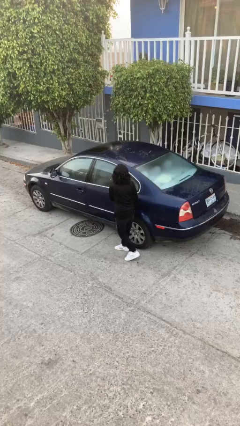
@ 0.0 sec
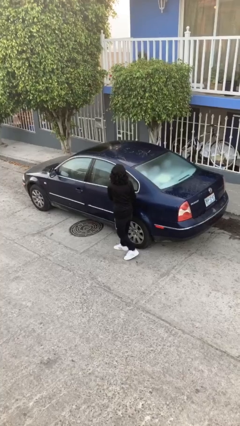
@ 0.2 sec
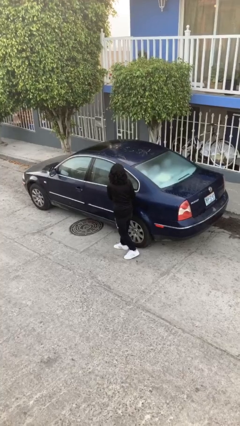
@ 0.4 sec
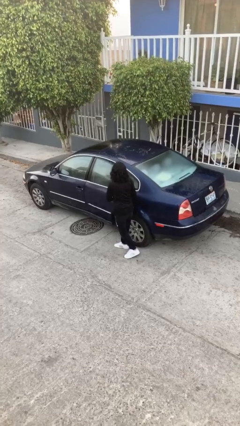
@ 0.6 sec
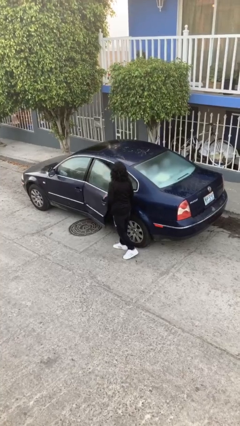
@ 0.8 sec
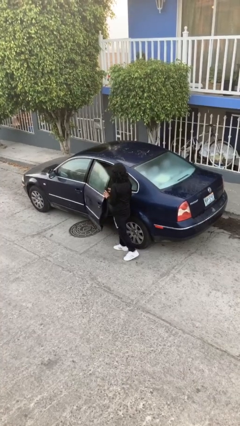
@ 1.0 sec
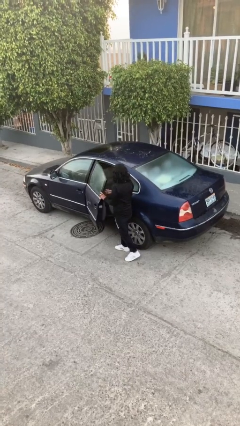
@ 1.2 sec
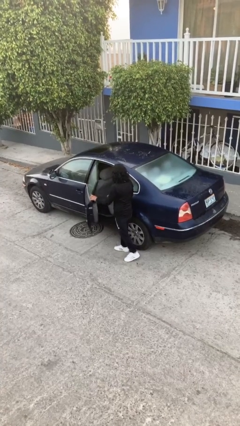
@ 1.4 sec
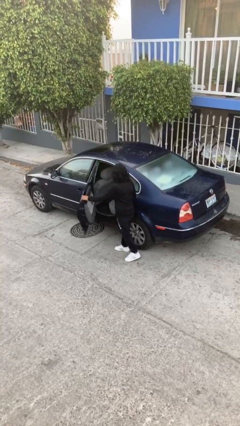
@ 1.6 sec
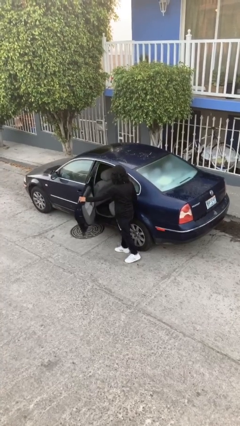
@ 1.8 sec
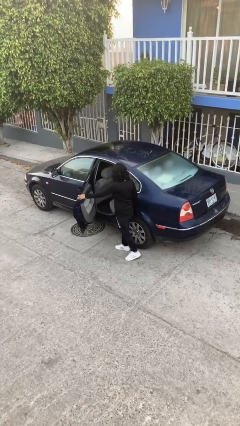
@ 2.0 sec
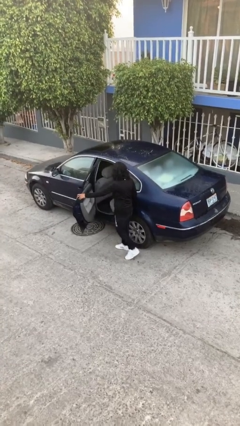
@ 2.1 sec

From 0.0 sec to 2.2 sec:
person opens car door

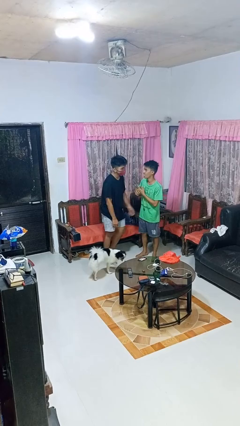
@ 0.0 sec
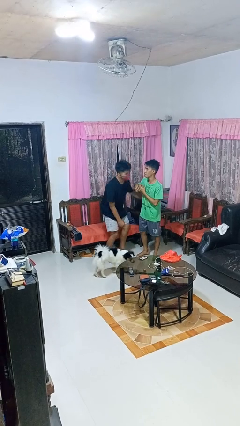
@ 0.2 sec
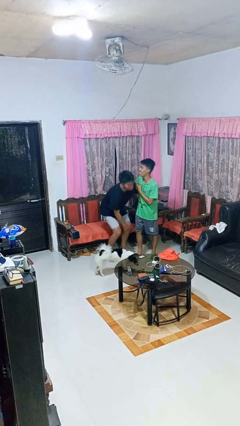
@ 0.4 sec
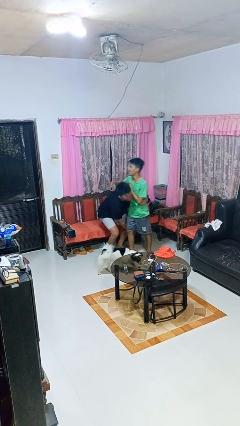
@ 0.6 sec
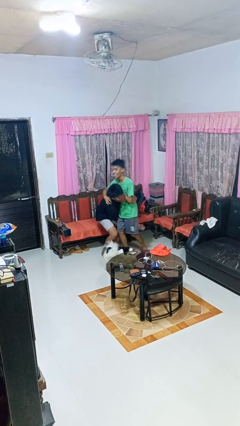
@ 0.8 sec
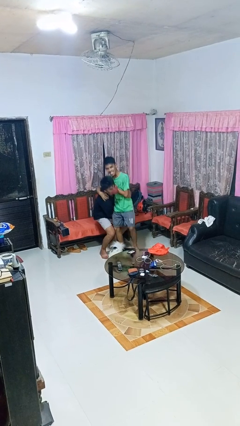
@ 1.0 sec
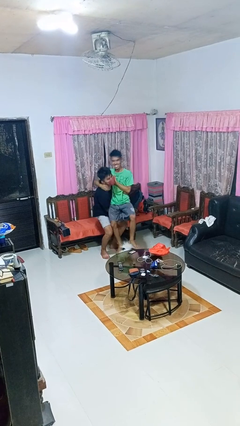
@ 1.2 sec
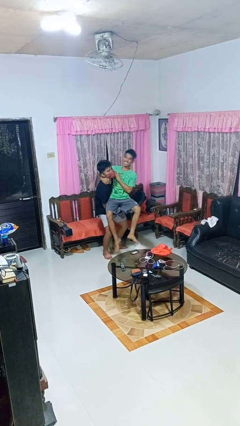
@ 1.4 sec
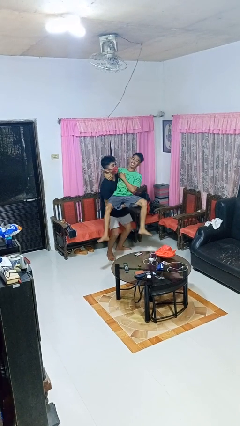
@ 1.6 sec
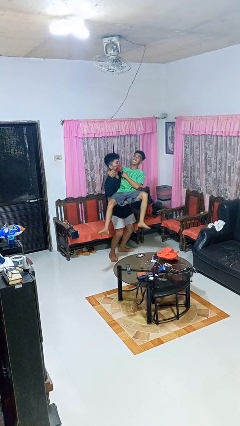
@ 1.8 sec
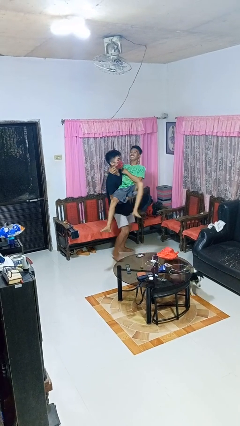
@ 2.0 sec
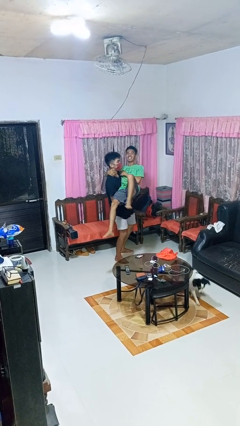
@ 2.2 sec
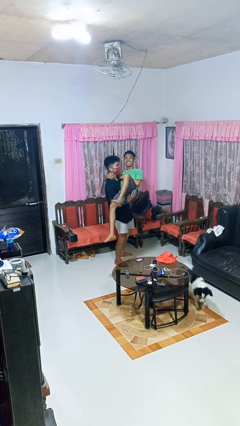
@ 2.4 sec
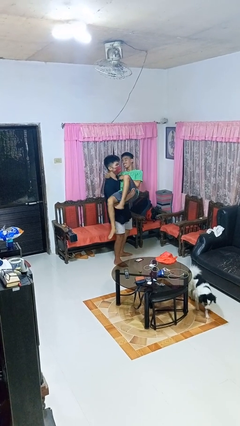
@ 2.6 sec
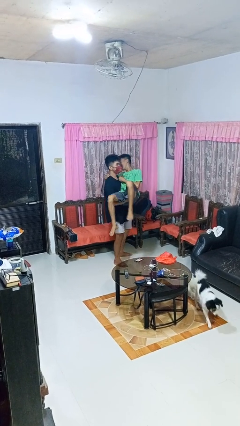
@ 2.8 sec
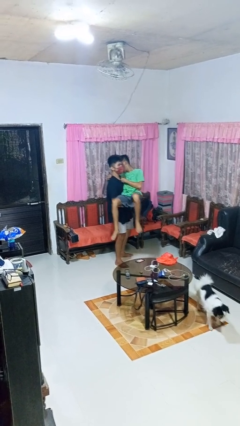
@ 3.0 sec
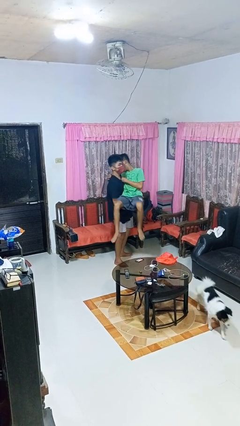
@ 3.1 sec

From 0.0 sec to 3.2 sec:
person picks up person

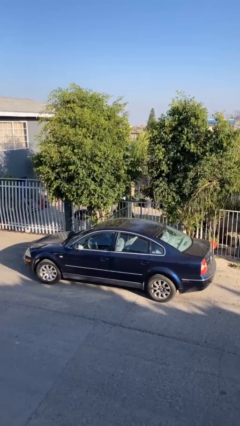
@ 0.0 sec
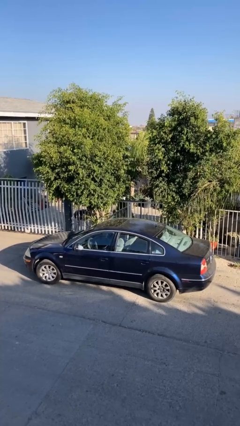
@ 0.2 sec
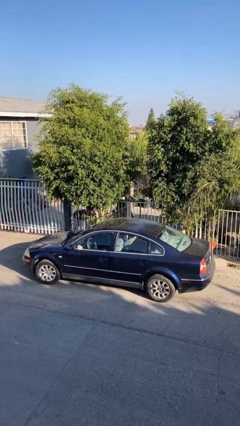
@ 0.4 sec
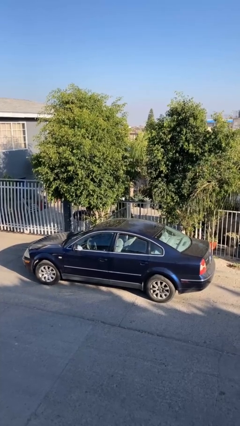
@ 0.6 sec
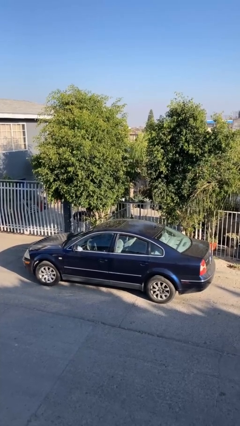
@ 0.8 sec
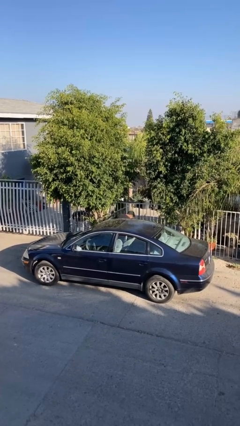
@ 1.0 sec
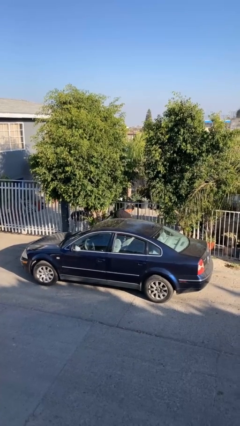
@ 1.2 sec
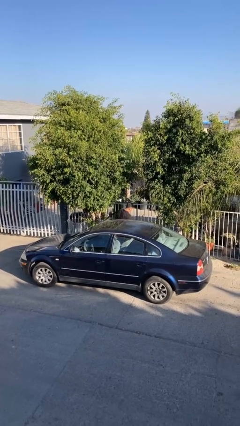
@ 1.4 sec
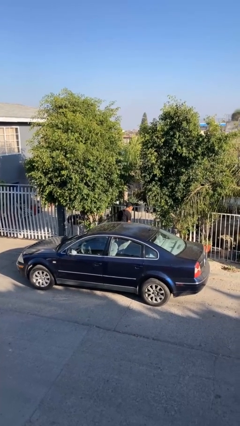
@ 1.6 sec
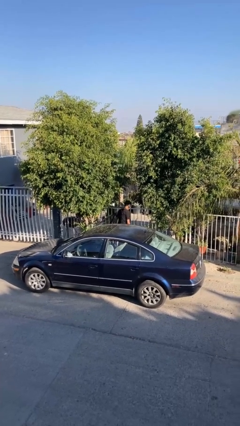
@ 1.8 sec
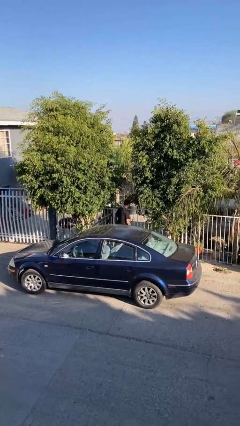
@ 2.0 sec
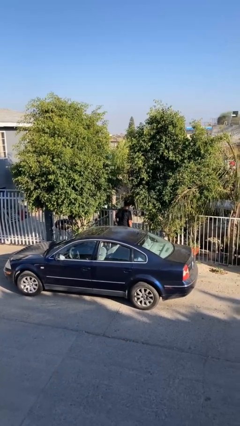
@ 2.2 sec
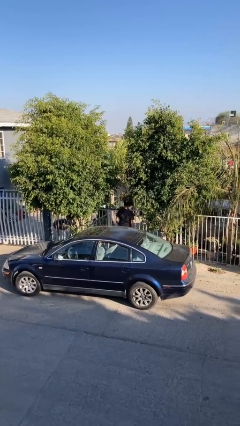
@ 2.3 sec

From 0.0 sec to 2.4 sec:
person exits car

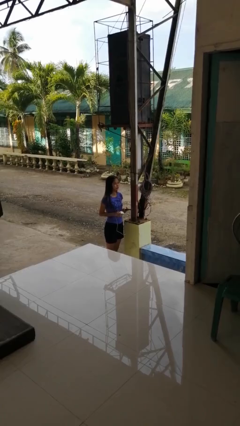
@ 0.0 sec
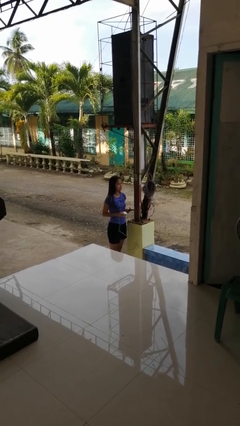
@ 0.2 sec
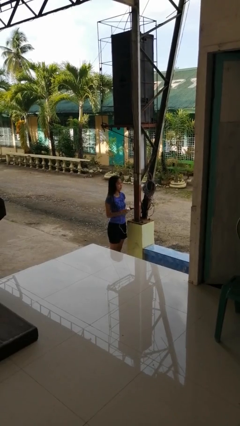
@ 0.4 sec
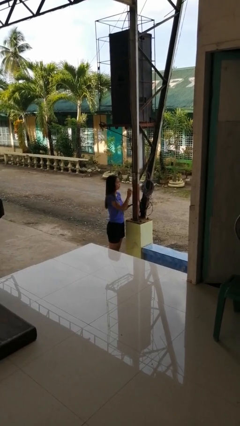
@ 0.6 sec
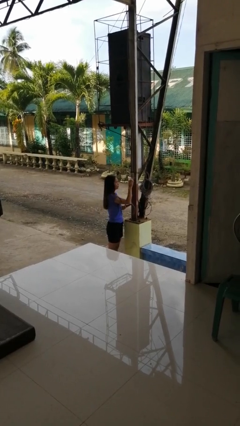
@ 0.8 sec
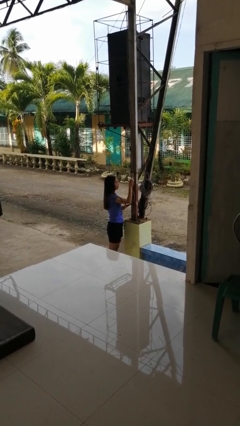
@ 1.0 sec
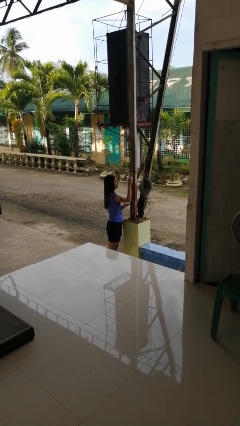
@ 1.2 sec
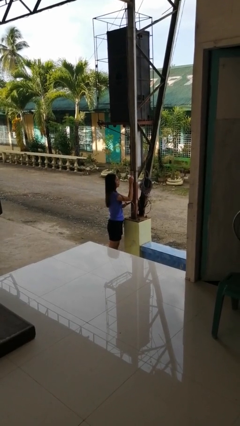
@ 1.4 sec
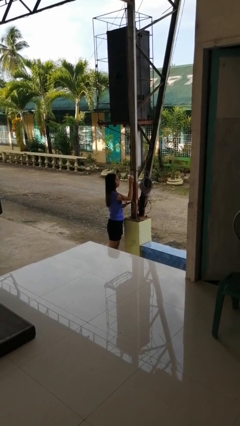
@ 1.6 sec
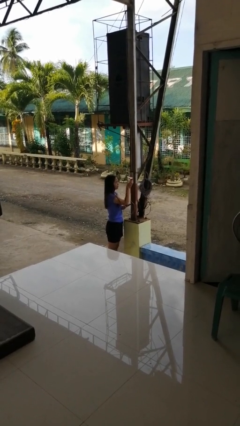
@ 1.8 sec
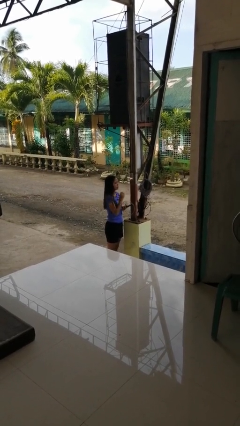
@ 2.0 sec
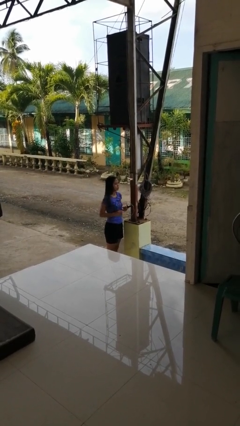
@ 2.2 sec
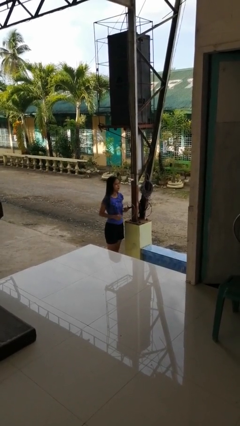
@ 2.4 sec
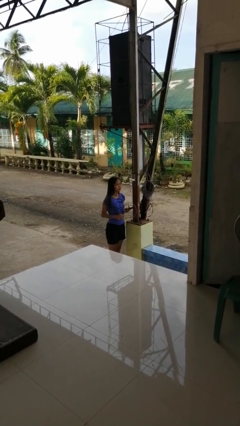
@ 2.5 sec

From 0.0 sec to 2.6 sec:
person plugs into electrical socket

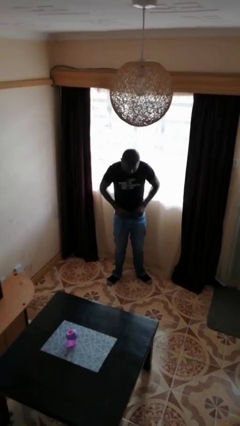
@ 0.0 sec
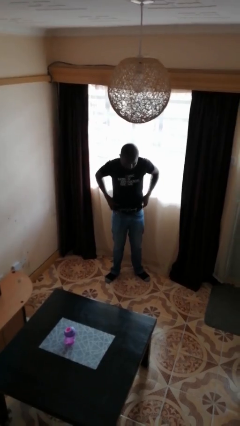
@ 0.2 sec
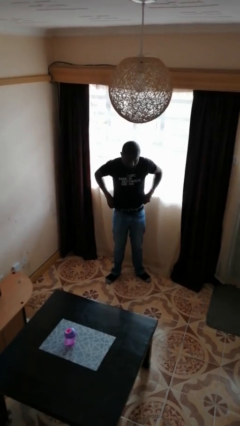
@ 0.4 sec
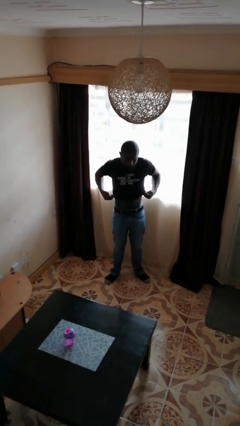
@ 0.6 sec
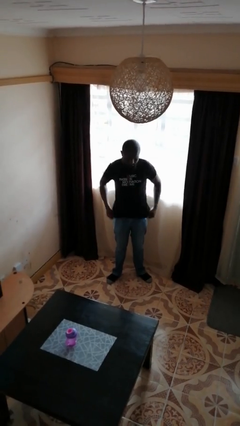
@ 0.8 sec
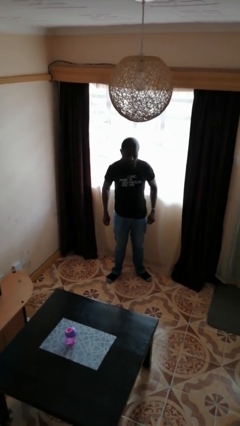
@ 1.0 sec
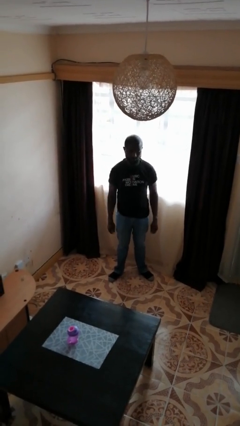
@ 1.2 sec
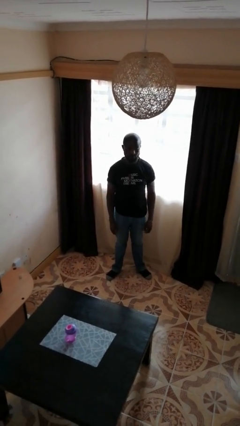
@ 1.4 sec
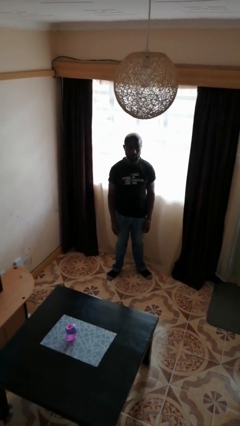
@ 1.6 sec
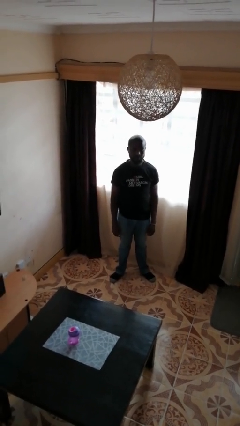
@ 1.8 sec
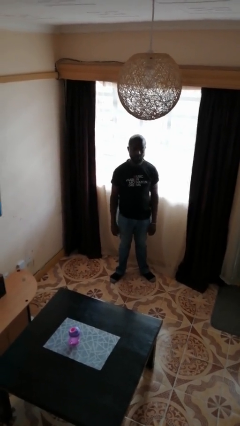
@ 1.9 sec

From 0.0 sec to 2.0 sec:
person untucks shirt

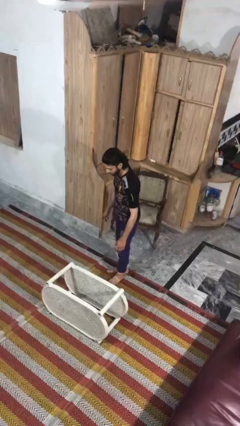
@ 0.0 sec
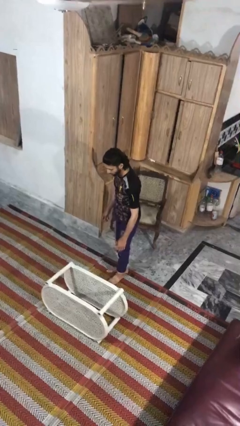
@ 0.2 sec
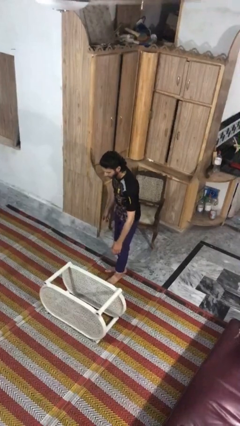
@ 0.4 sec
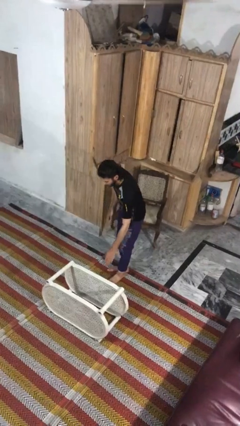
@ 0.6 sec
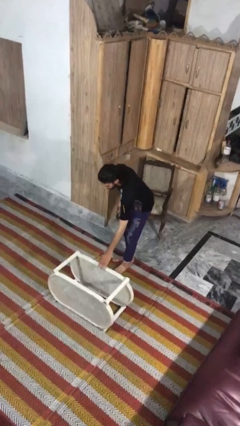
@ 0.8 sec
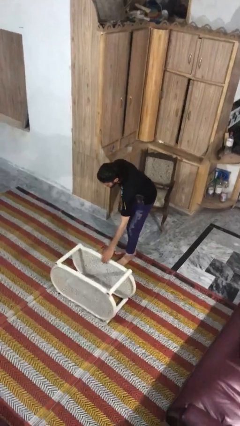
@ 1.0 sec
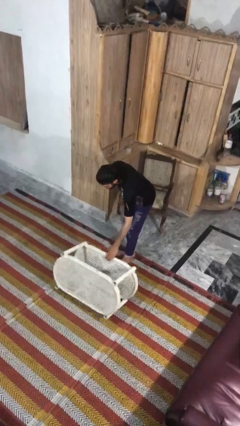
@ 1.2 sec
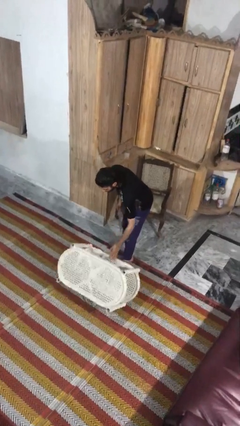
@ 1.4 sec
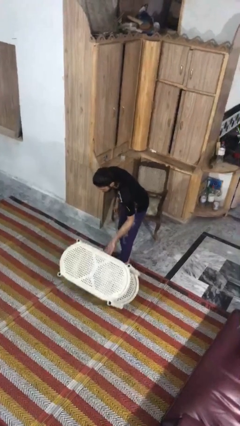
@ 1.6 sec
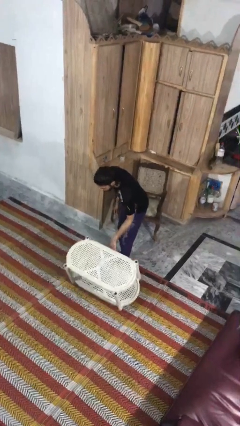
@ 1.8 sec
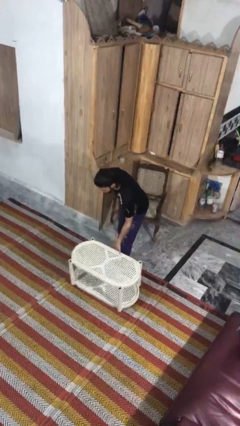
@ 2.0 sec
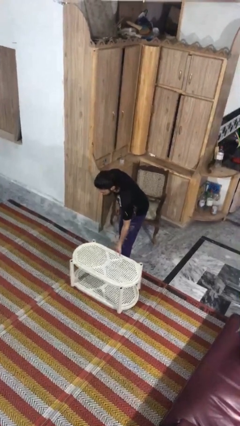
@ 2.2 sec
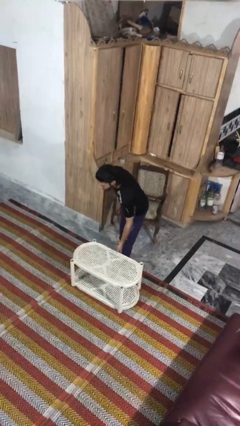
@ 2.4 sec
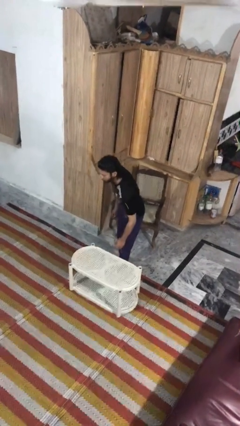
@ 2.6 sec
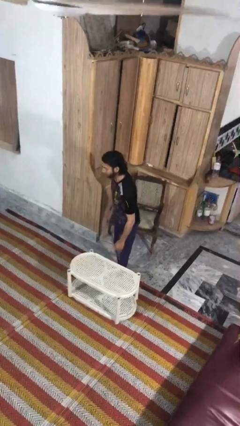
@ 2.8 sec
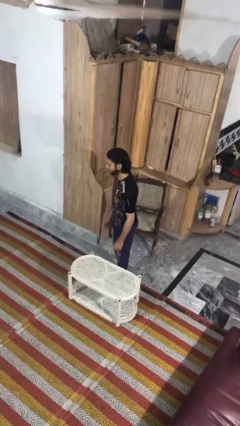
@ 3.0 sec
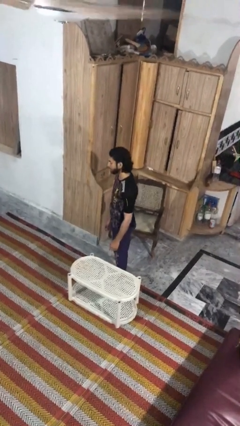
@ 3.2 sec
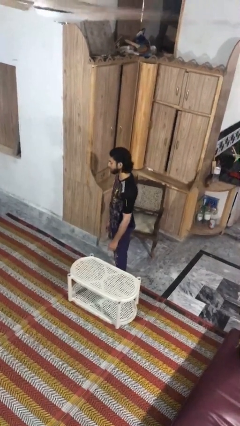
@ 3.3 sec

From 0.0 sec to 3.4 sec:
person sets upright furniture

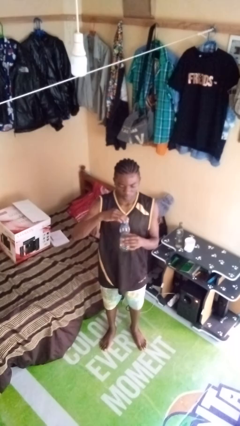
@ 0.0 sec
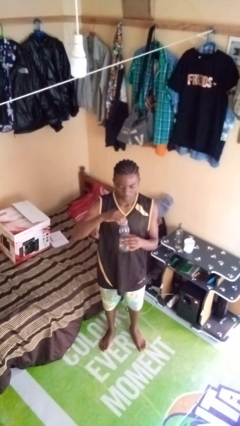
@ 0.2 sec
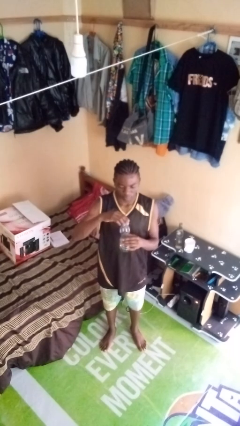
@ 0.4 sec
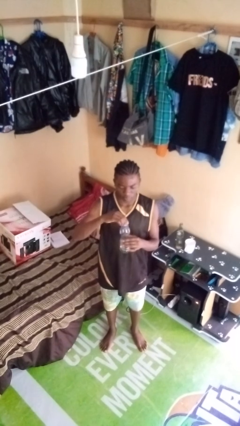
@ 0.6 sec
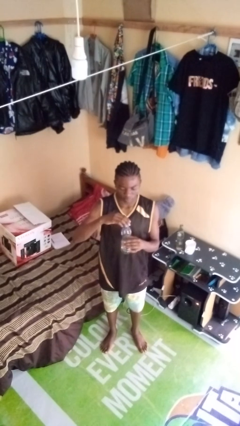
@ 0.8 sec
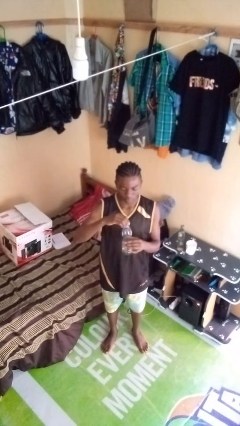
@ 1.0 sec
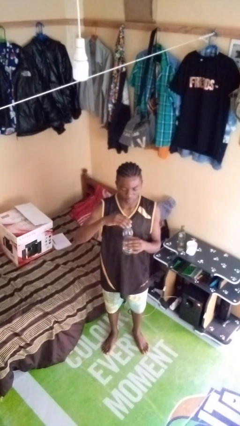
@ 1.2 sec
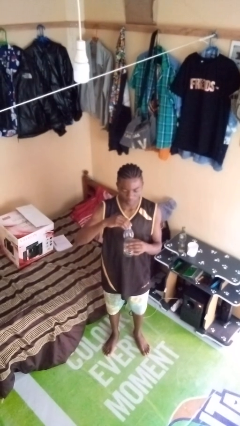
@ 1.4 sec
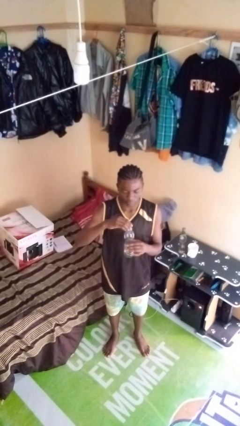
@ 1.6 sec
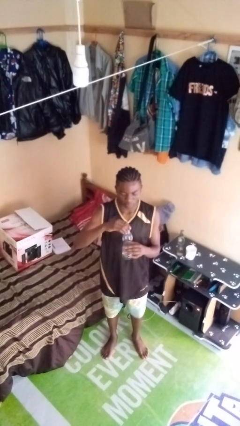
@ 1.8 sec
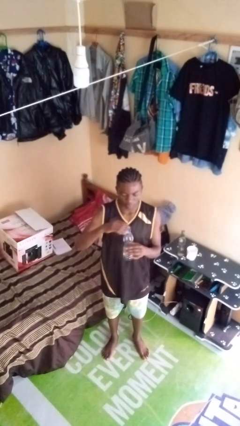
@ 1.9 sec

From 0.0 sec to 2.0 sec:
person screws lid to bottle
